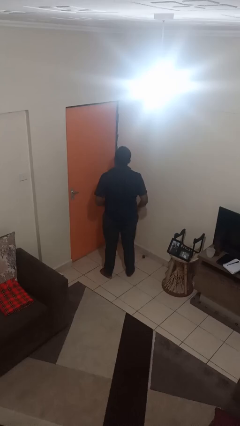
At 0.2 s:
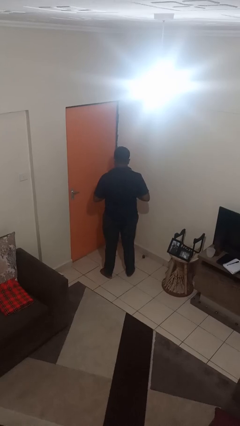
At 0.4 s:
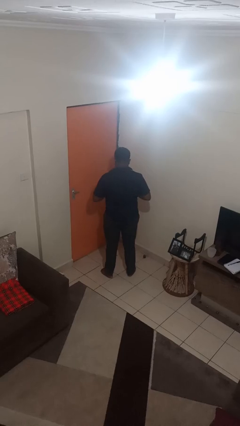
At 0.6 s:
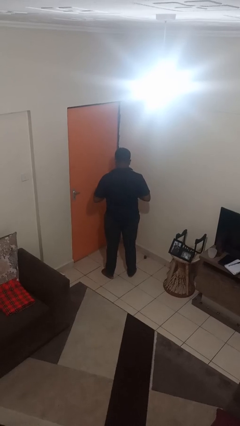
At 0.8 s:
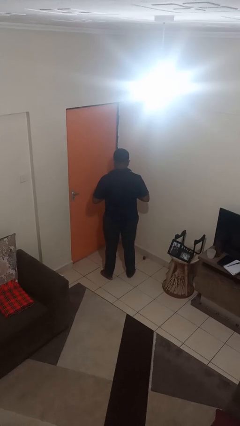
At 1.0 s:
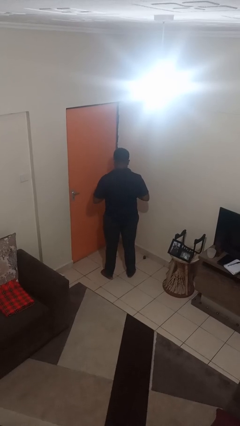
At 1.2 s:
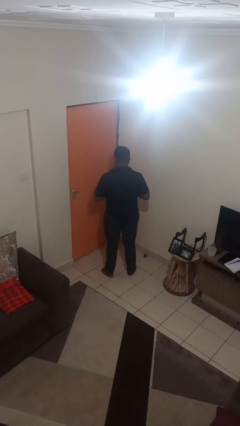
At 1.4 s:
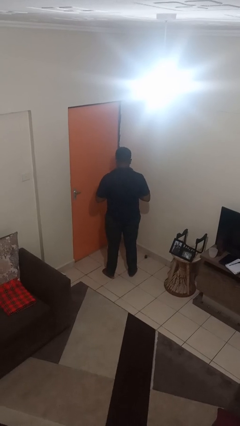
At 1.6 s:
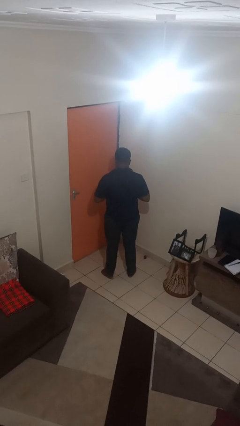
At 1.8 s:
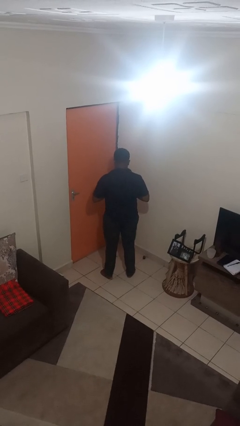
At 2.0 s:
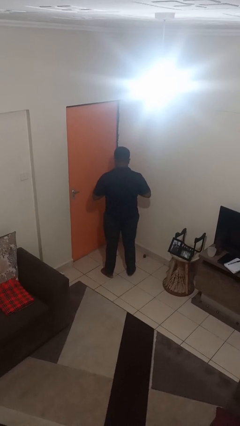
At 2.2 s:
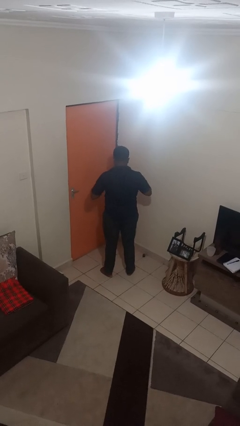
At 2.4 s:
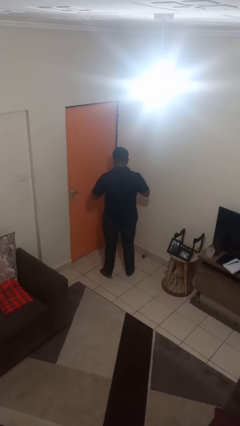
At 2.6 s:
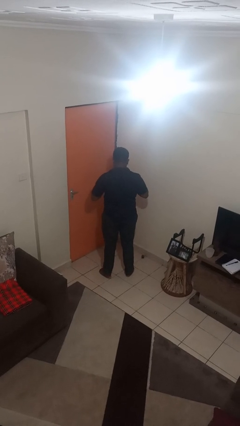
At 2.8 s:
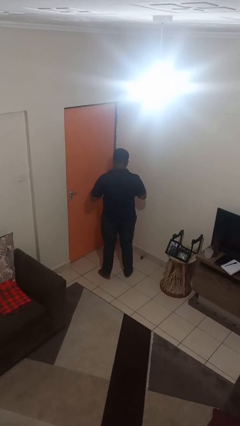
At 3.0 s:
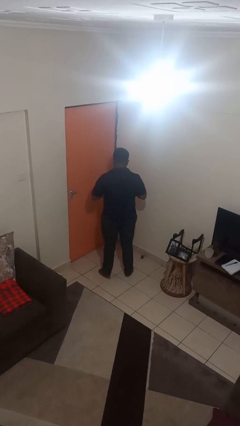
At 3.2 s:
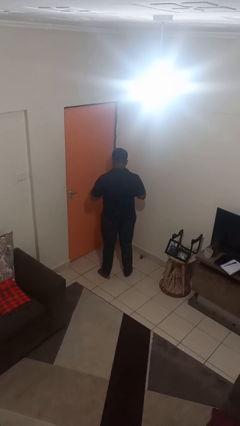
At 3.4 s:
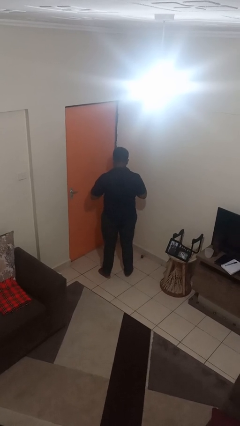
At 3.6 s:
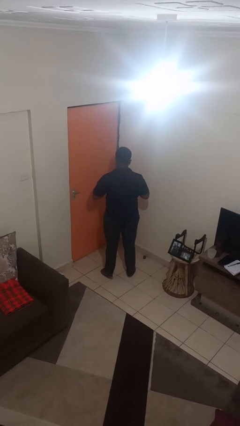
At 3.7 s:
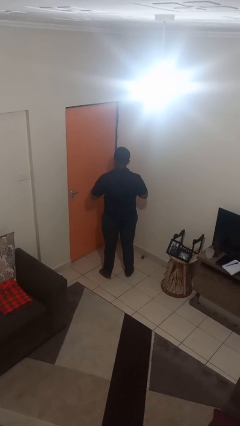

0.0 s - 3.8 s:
person buttons shirt

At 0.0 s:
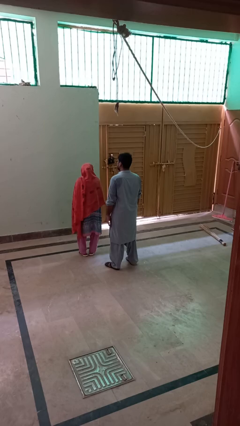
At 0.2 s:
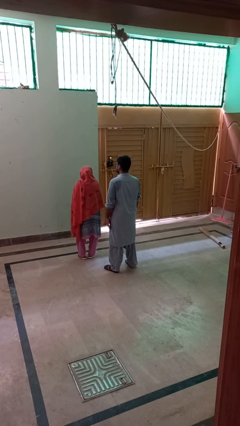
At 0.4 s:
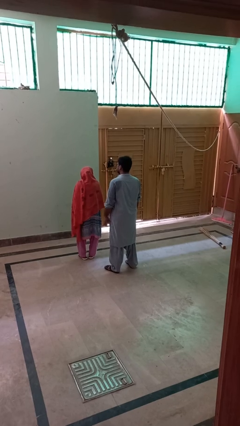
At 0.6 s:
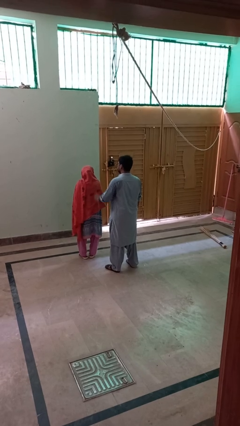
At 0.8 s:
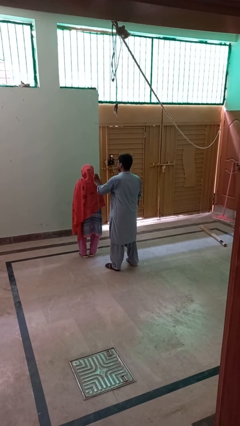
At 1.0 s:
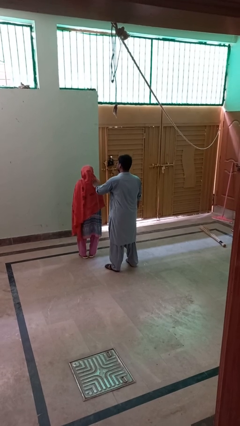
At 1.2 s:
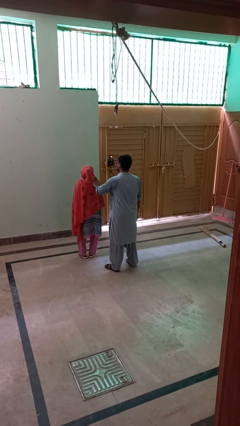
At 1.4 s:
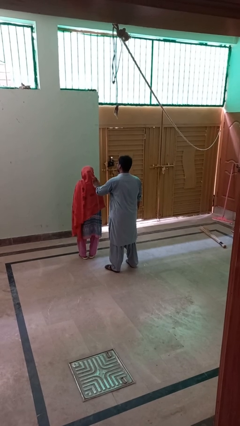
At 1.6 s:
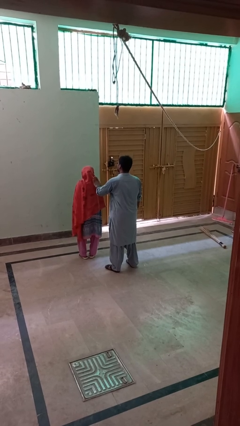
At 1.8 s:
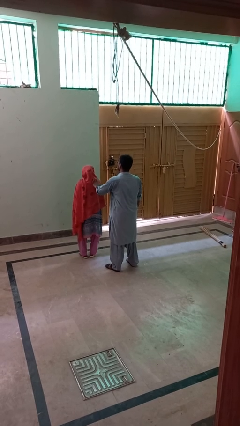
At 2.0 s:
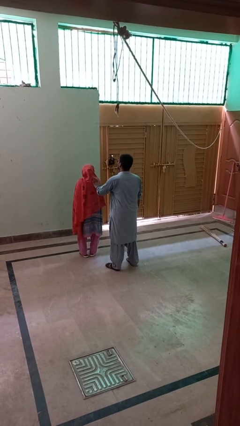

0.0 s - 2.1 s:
person touches back of person

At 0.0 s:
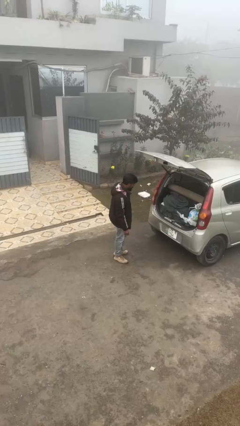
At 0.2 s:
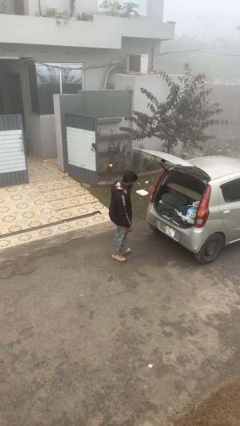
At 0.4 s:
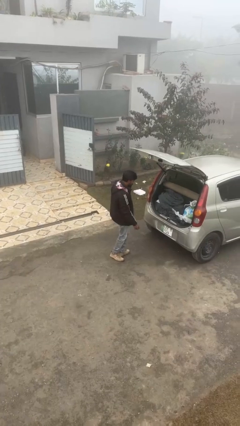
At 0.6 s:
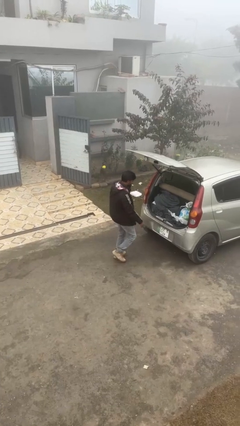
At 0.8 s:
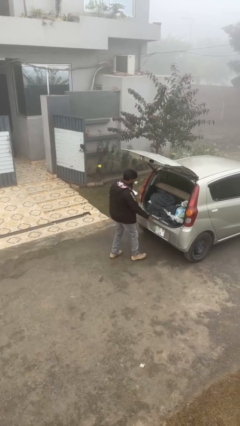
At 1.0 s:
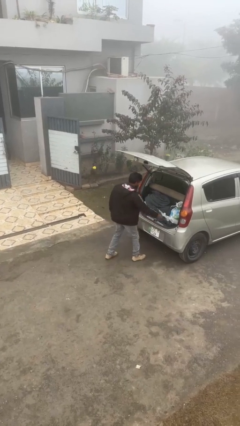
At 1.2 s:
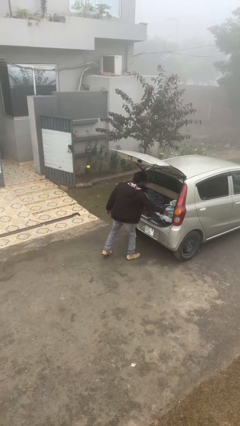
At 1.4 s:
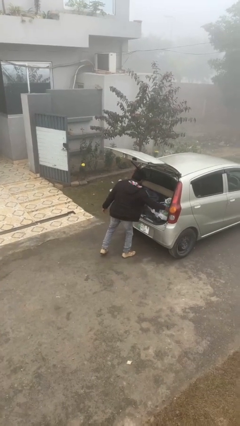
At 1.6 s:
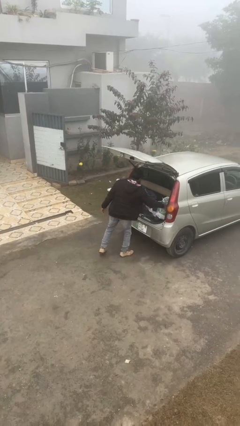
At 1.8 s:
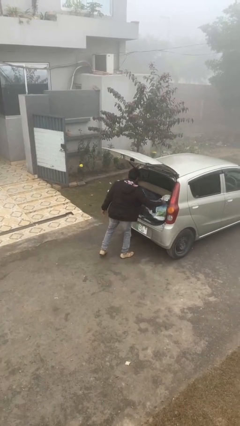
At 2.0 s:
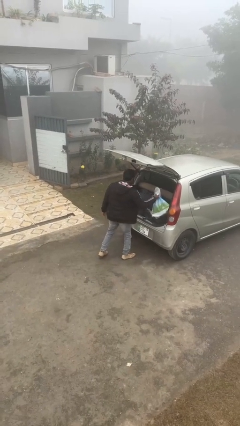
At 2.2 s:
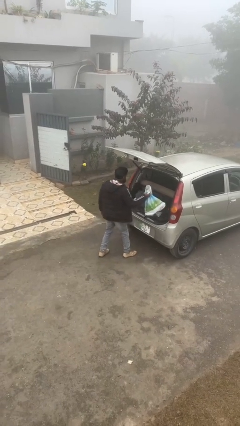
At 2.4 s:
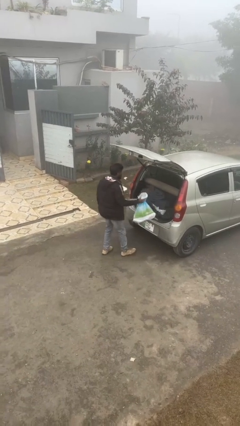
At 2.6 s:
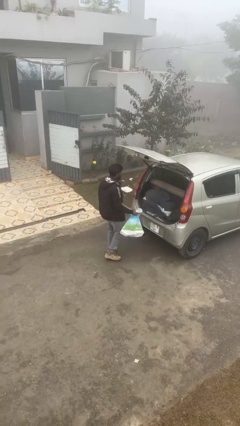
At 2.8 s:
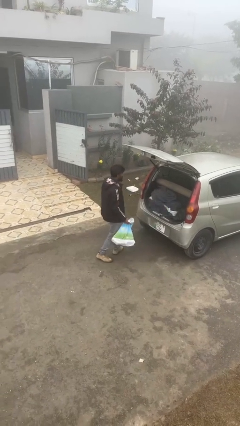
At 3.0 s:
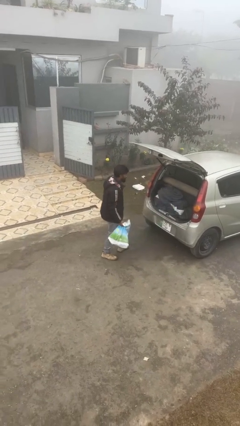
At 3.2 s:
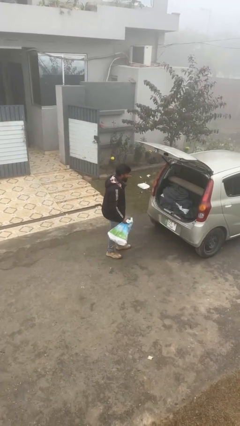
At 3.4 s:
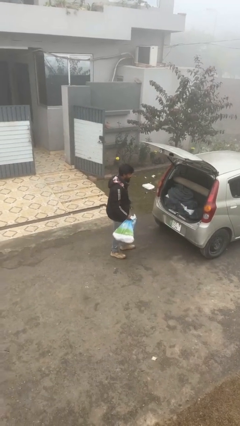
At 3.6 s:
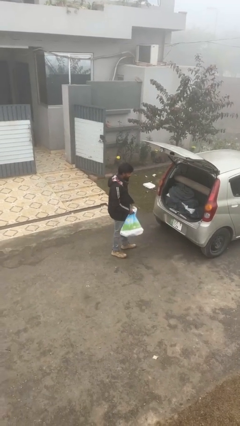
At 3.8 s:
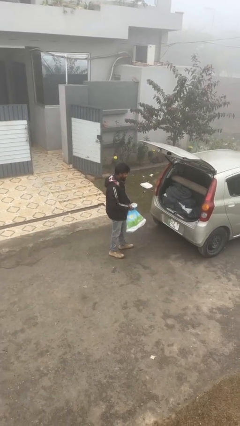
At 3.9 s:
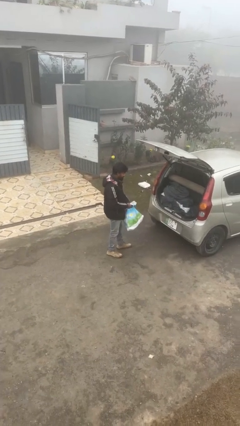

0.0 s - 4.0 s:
person unloads car

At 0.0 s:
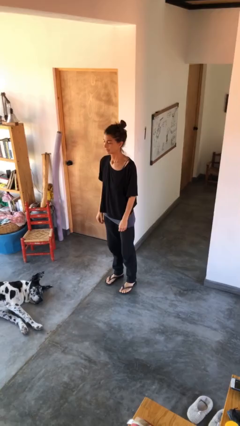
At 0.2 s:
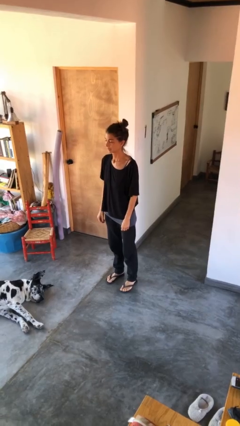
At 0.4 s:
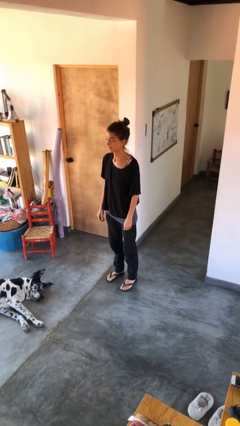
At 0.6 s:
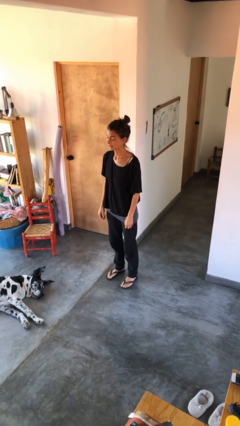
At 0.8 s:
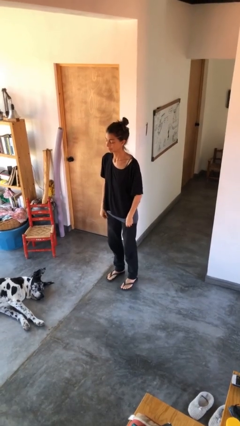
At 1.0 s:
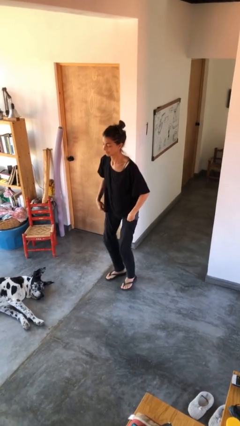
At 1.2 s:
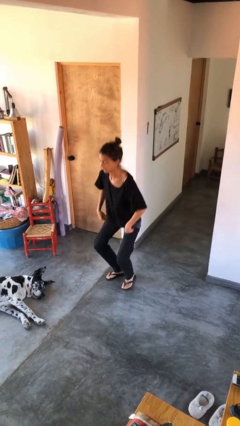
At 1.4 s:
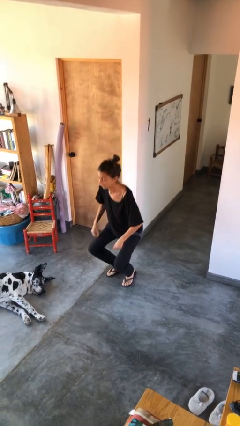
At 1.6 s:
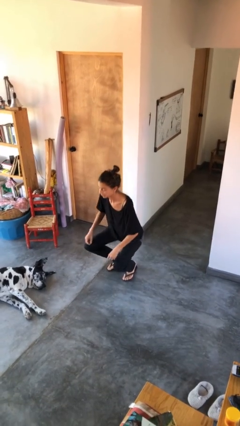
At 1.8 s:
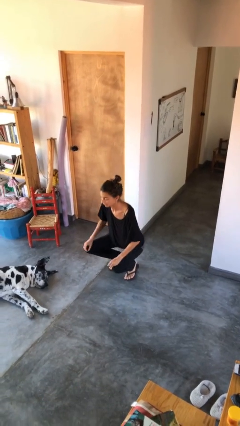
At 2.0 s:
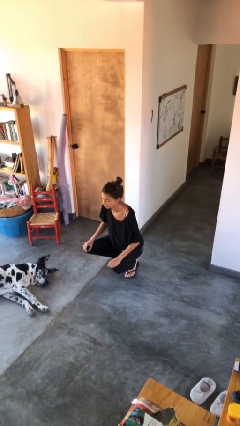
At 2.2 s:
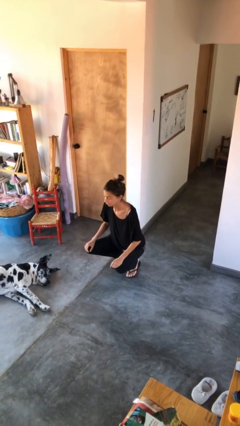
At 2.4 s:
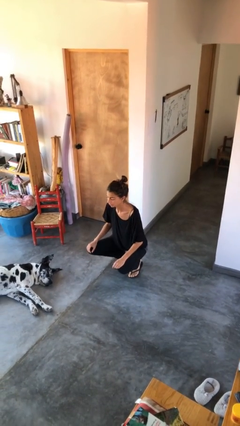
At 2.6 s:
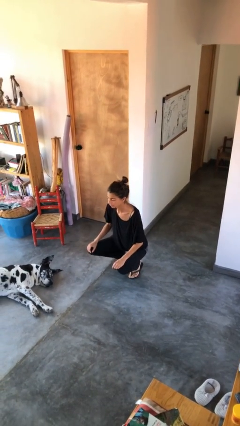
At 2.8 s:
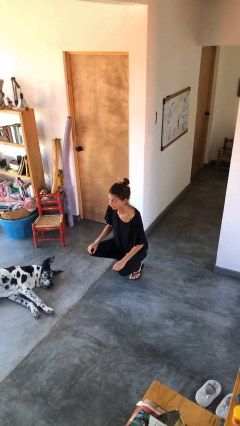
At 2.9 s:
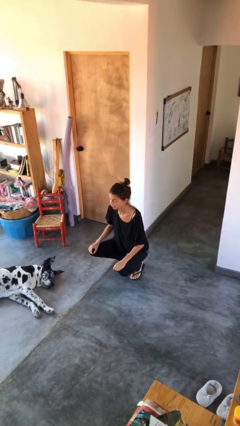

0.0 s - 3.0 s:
person squats

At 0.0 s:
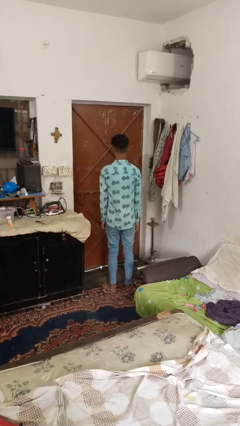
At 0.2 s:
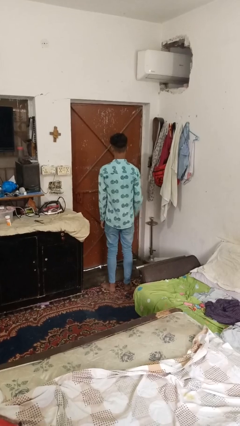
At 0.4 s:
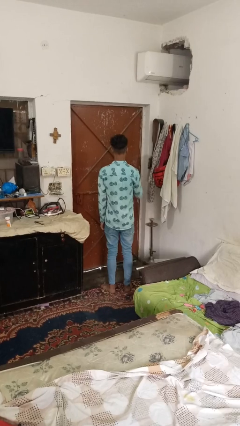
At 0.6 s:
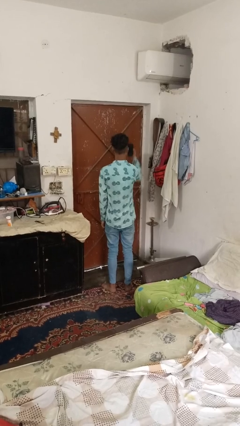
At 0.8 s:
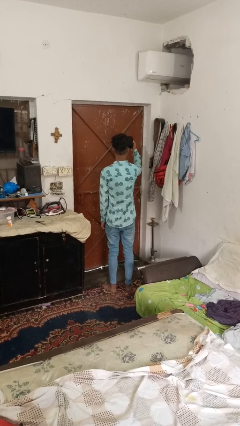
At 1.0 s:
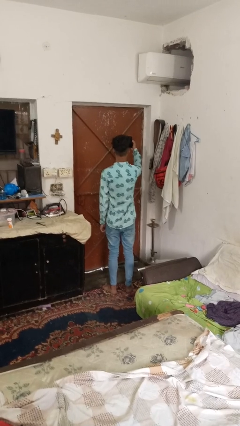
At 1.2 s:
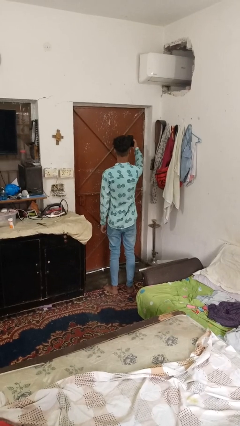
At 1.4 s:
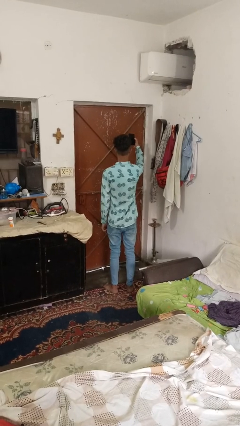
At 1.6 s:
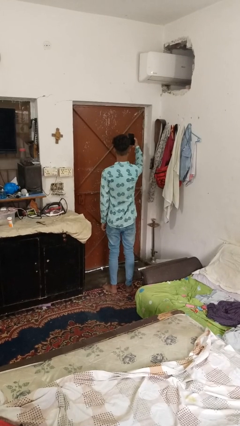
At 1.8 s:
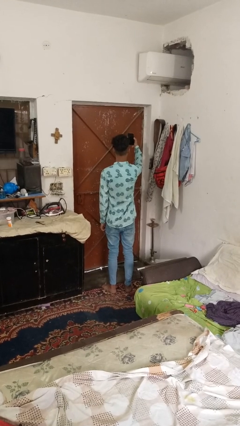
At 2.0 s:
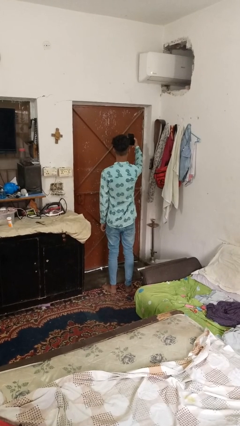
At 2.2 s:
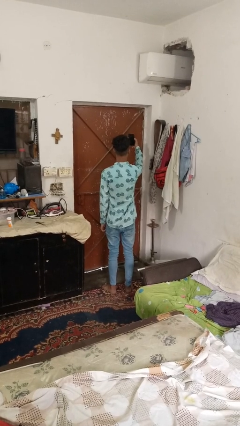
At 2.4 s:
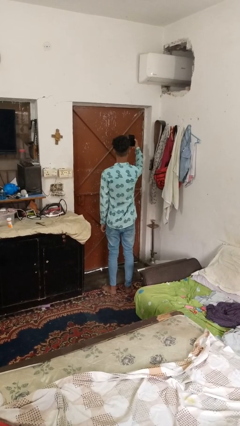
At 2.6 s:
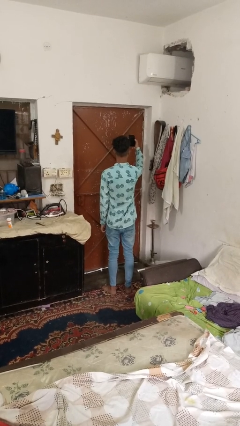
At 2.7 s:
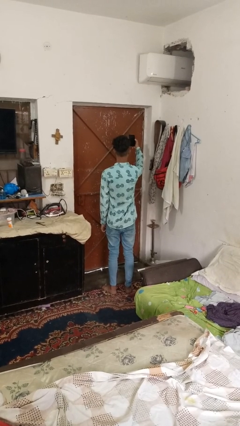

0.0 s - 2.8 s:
person takes selfie

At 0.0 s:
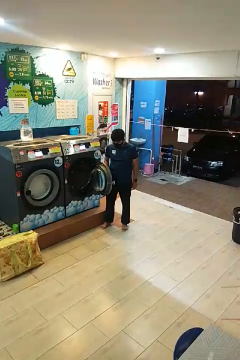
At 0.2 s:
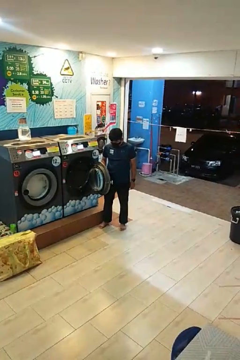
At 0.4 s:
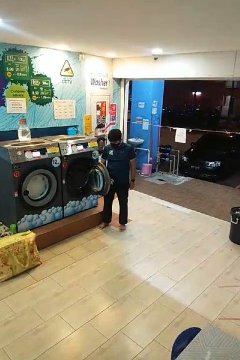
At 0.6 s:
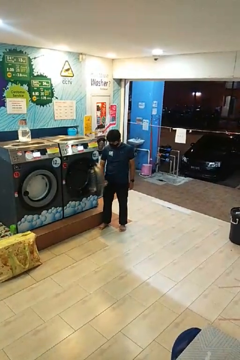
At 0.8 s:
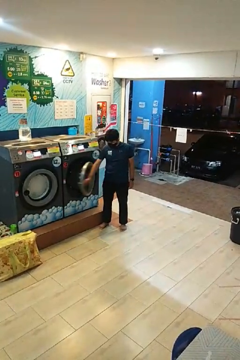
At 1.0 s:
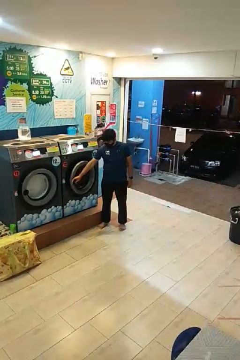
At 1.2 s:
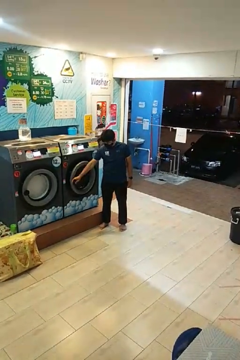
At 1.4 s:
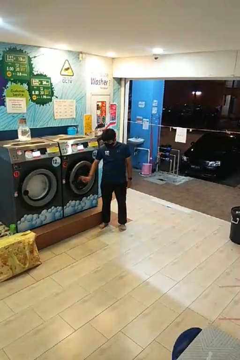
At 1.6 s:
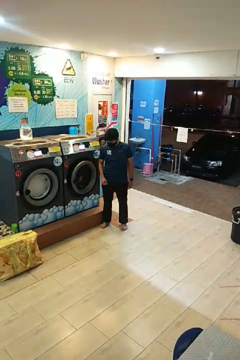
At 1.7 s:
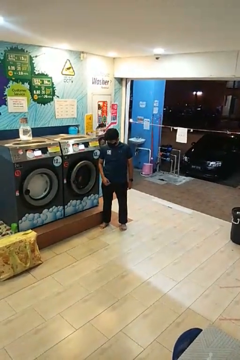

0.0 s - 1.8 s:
person closes clothes washer

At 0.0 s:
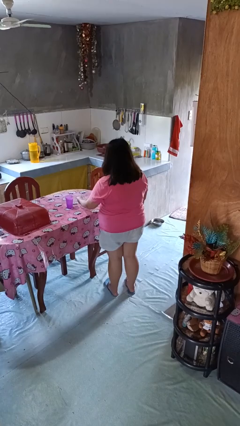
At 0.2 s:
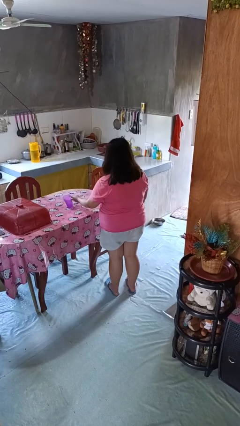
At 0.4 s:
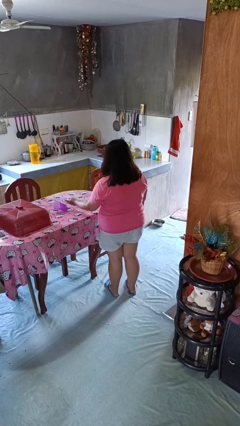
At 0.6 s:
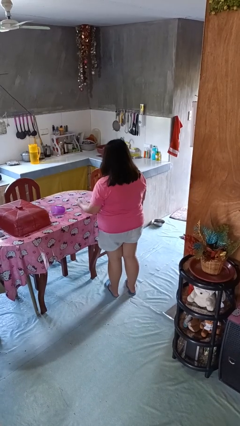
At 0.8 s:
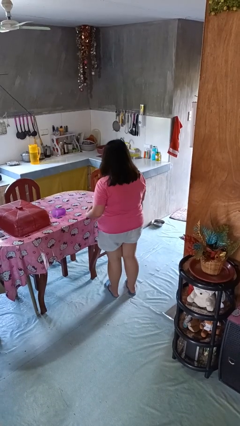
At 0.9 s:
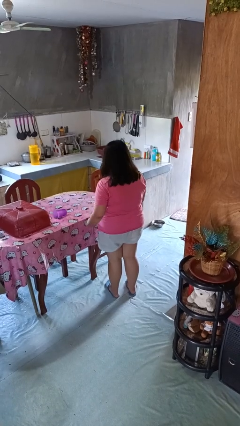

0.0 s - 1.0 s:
person knocks over glass
